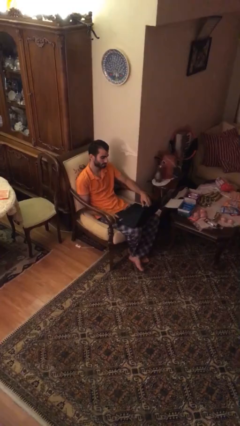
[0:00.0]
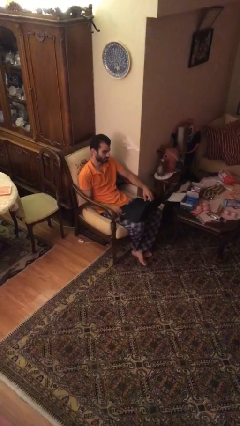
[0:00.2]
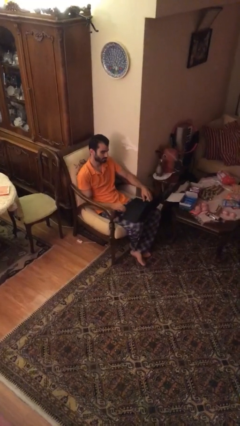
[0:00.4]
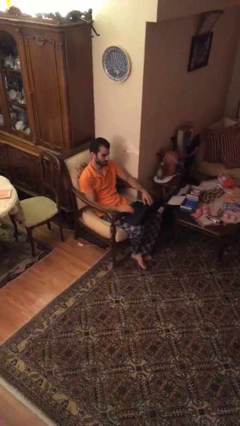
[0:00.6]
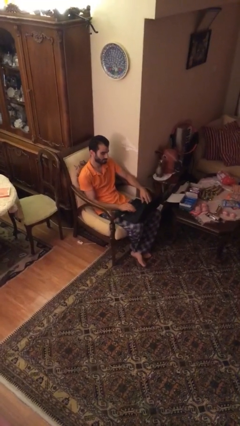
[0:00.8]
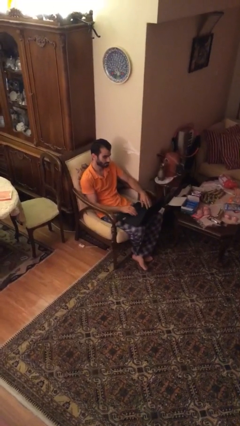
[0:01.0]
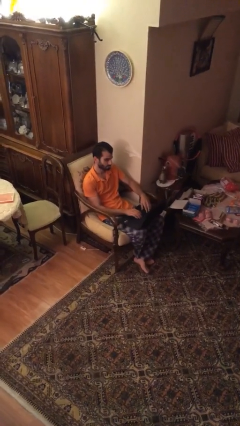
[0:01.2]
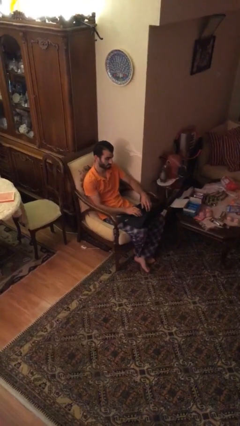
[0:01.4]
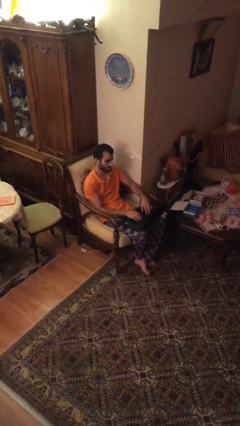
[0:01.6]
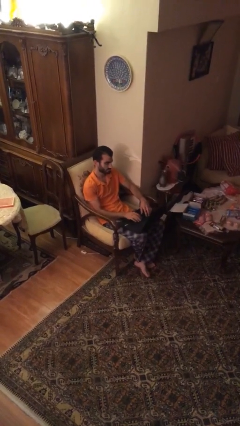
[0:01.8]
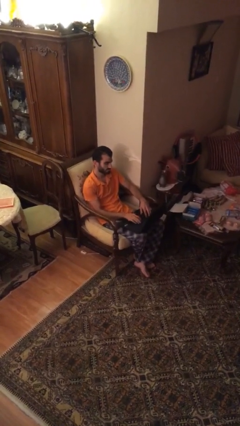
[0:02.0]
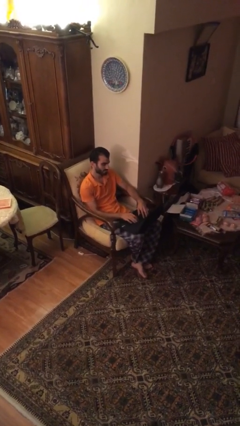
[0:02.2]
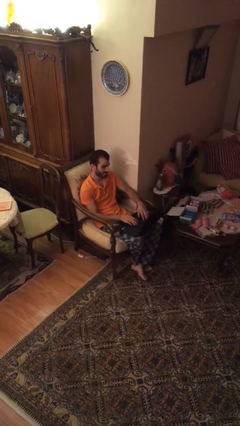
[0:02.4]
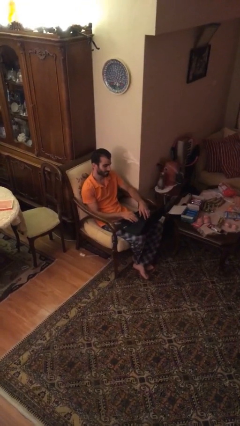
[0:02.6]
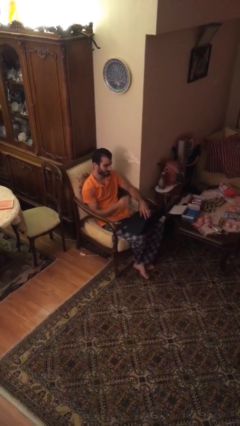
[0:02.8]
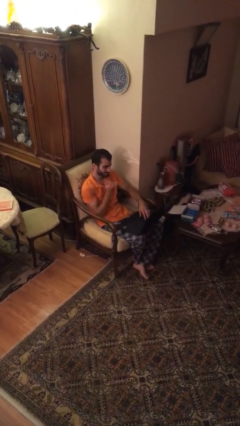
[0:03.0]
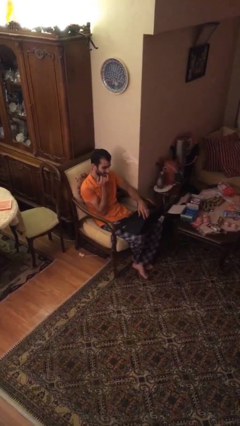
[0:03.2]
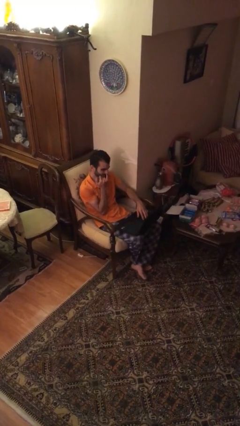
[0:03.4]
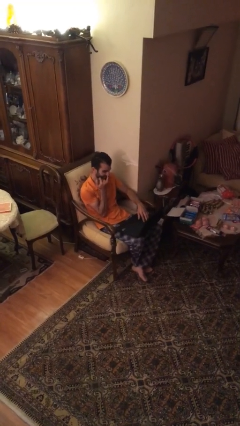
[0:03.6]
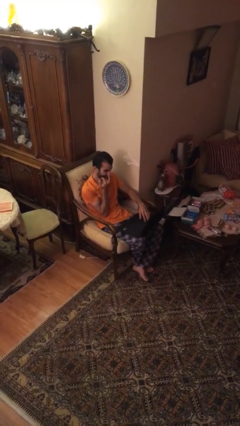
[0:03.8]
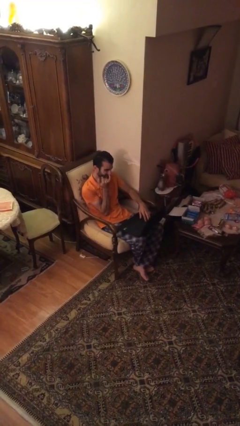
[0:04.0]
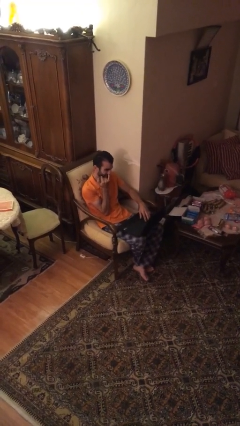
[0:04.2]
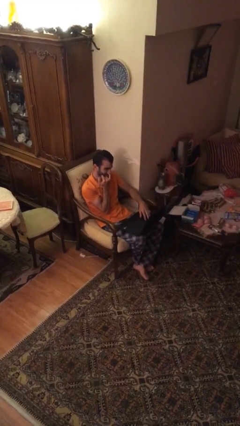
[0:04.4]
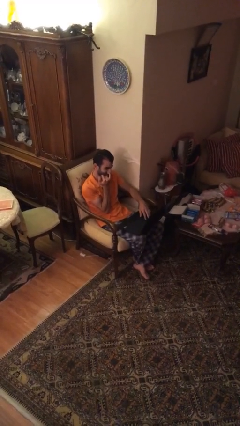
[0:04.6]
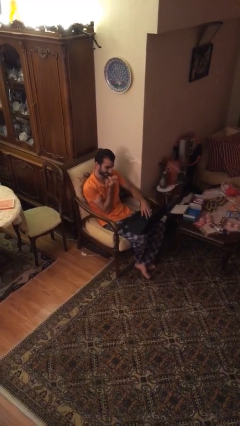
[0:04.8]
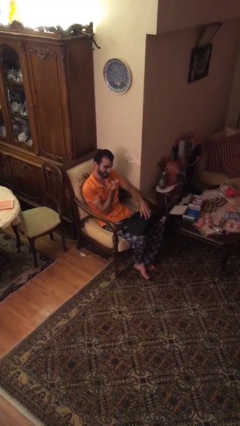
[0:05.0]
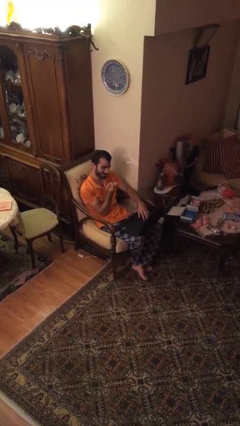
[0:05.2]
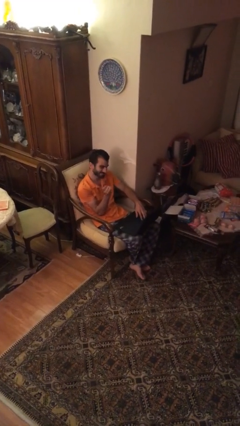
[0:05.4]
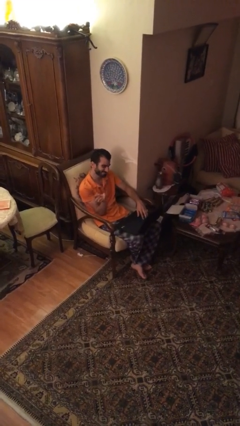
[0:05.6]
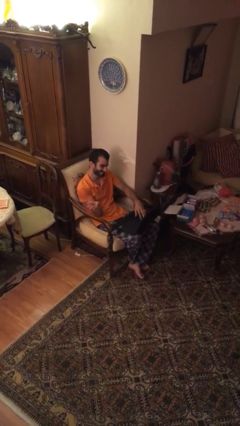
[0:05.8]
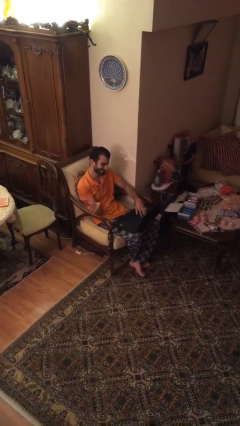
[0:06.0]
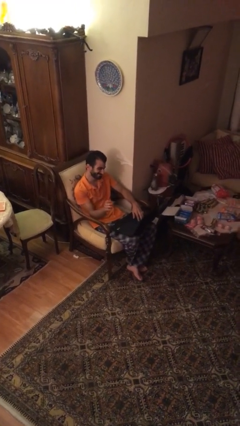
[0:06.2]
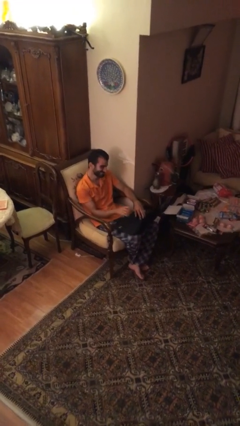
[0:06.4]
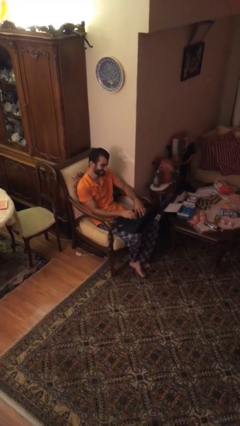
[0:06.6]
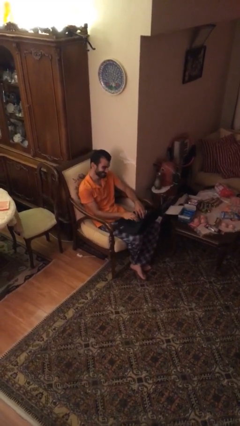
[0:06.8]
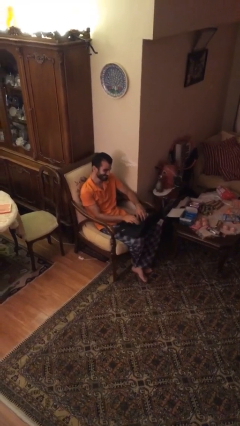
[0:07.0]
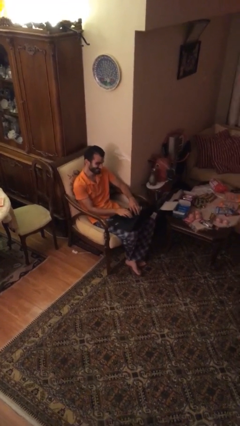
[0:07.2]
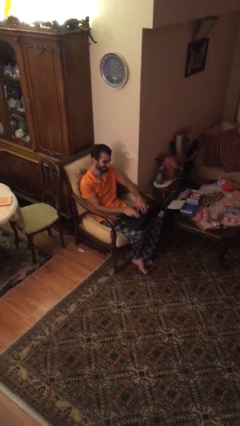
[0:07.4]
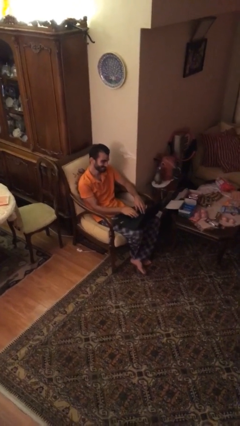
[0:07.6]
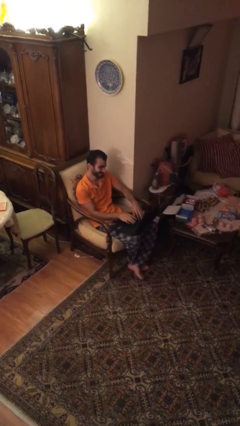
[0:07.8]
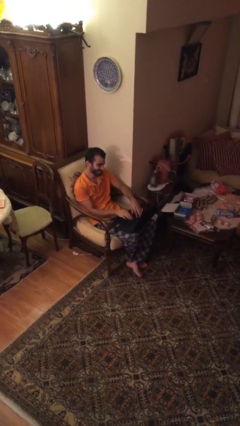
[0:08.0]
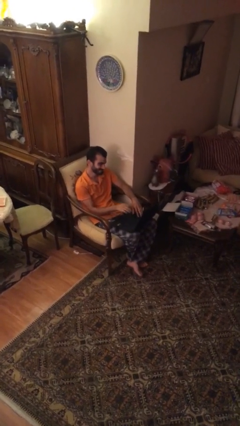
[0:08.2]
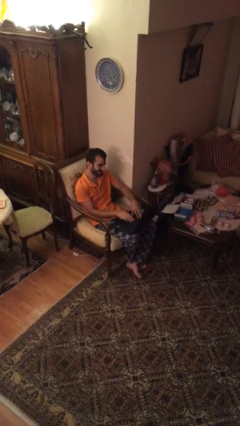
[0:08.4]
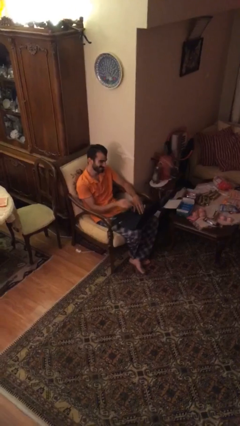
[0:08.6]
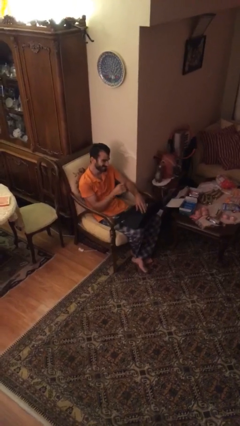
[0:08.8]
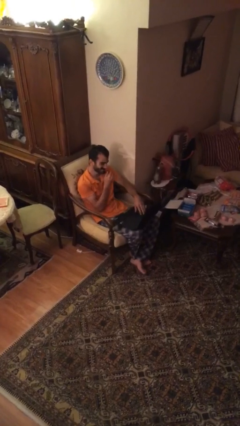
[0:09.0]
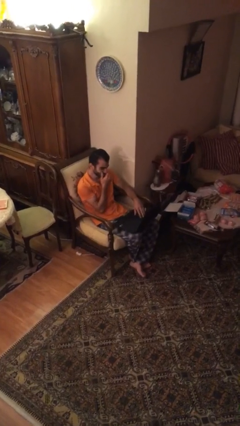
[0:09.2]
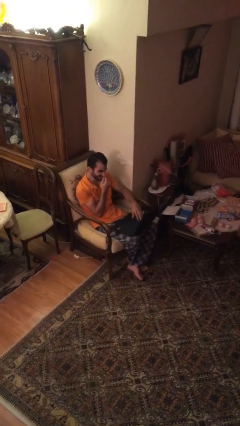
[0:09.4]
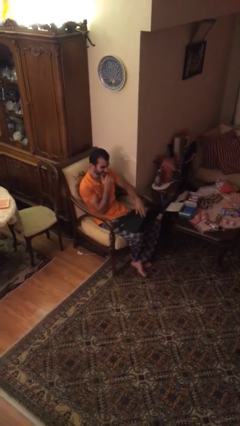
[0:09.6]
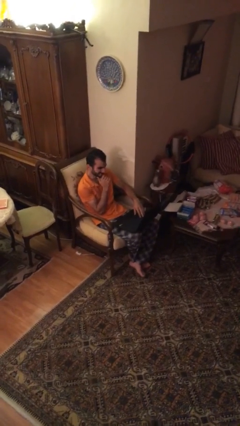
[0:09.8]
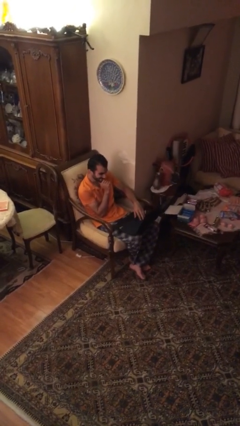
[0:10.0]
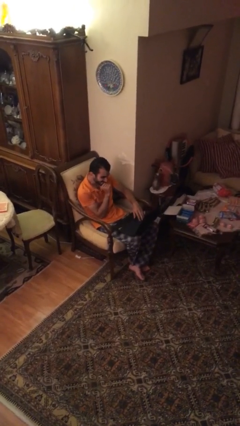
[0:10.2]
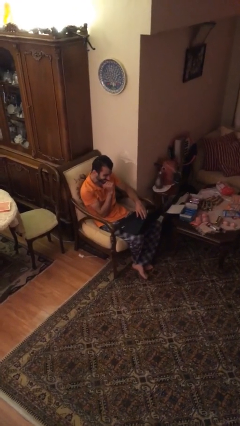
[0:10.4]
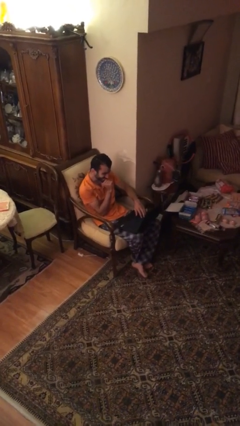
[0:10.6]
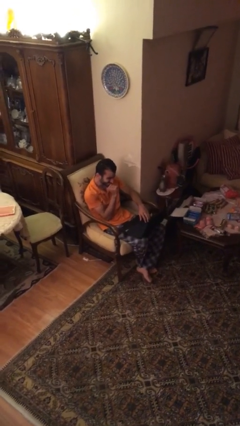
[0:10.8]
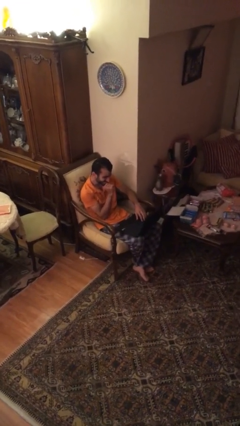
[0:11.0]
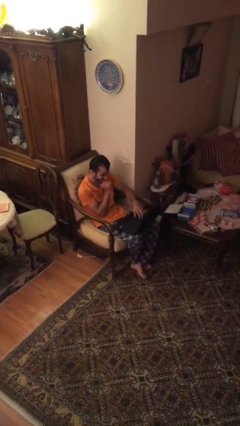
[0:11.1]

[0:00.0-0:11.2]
person interacts with laptop

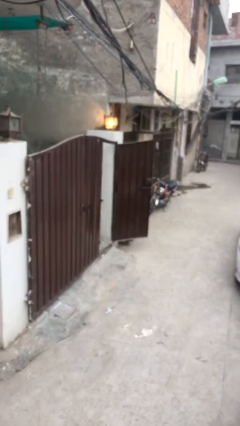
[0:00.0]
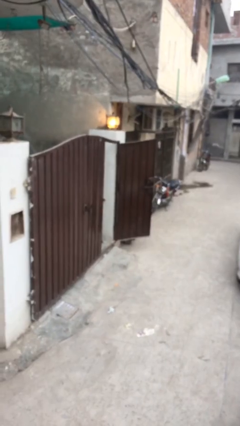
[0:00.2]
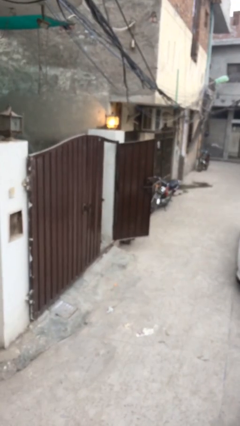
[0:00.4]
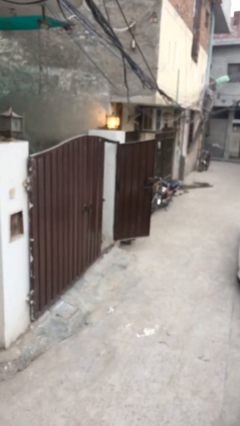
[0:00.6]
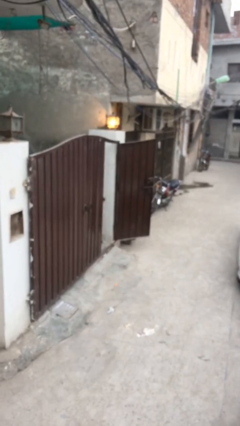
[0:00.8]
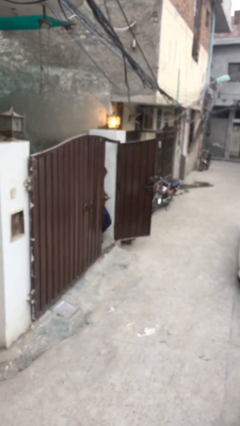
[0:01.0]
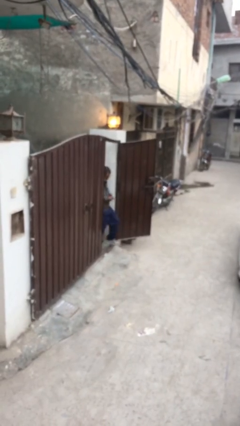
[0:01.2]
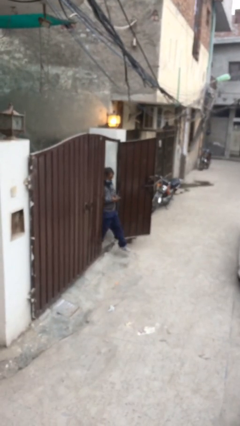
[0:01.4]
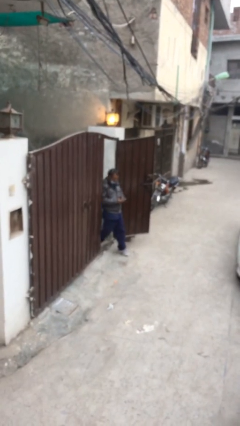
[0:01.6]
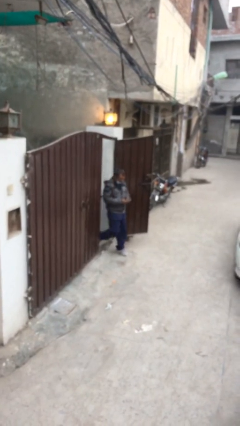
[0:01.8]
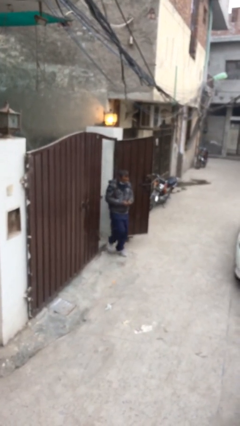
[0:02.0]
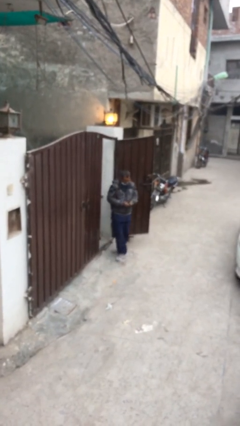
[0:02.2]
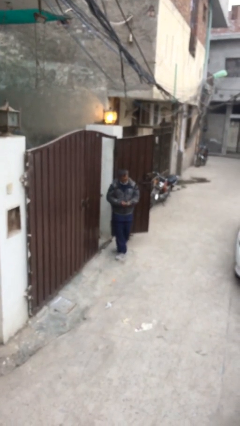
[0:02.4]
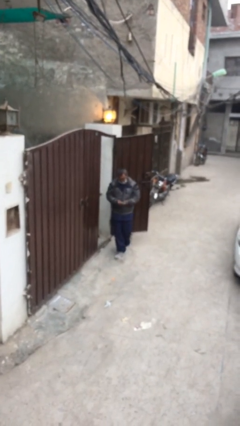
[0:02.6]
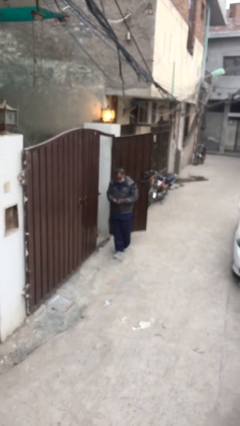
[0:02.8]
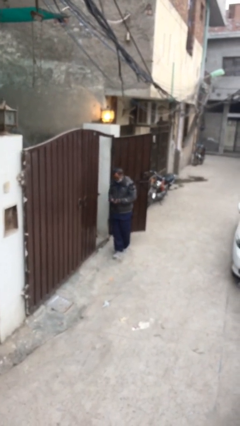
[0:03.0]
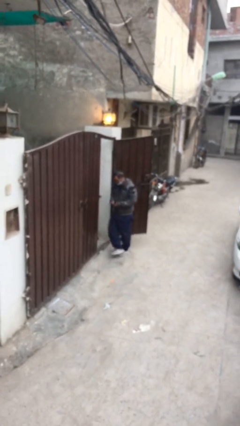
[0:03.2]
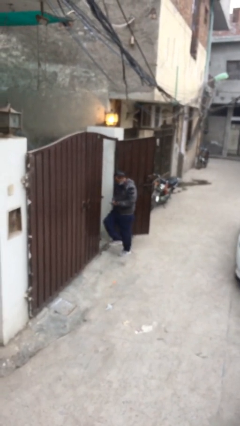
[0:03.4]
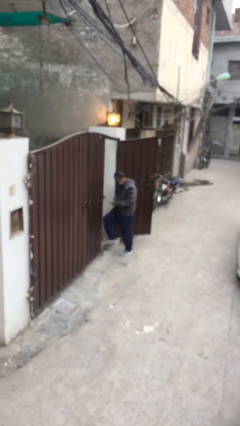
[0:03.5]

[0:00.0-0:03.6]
person enters scene through structure

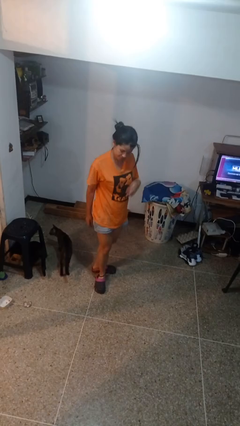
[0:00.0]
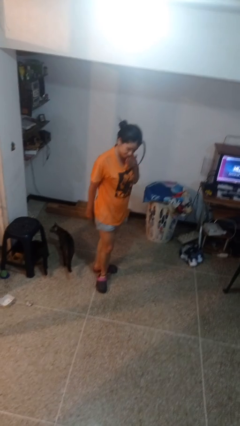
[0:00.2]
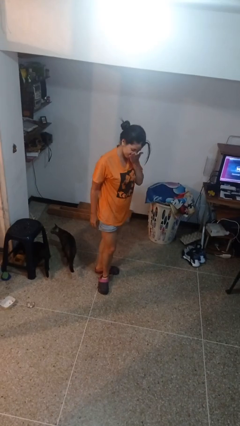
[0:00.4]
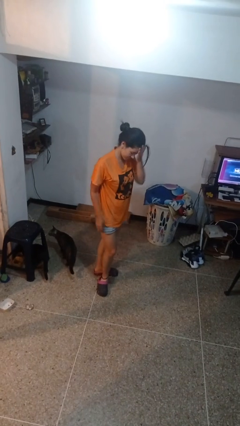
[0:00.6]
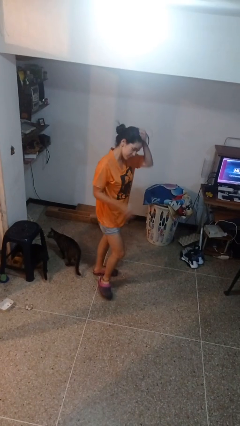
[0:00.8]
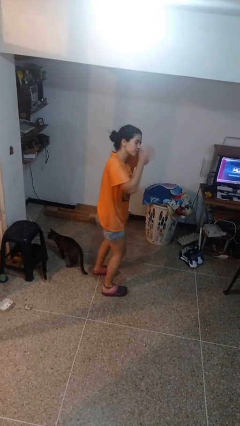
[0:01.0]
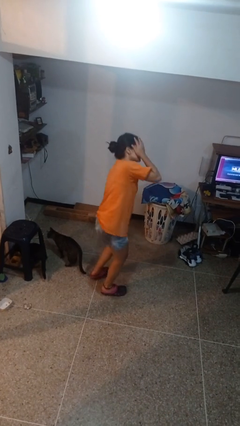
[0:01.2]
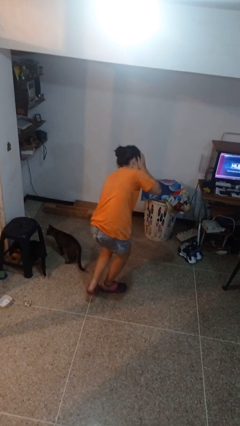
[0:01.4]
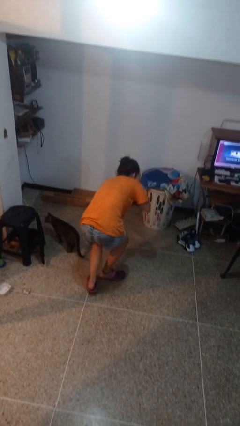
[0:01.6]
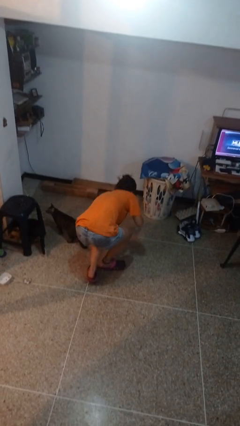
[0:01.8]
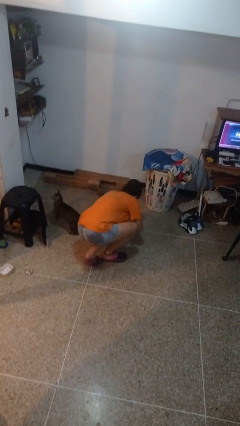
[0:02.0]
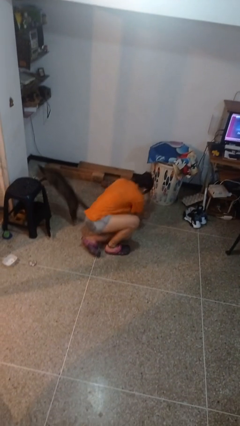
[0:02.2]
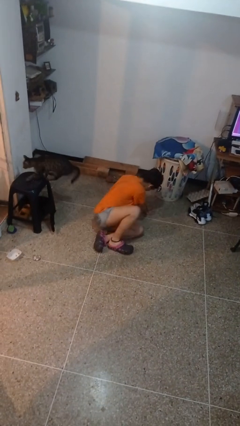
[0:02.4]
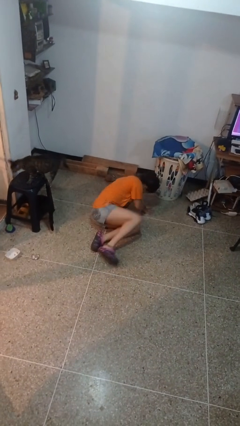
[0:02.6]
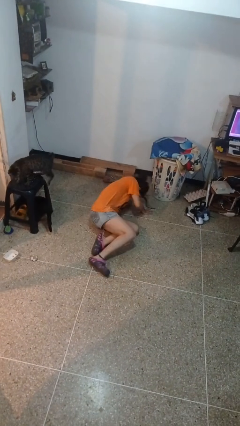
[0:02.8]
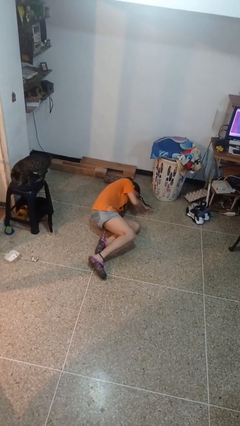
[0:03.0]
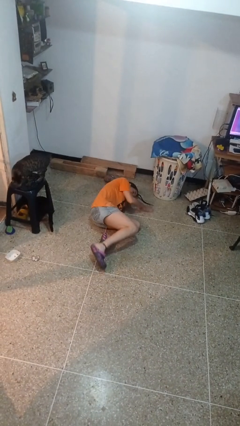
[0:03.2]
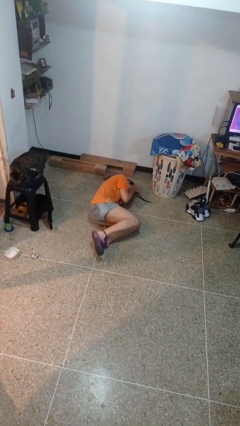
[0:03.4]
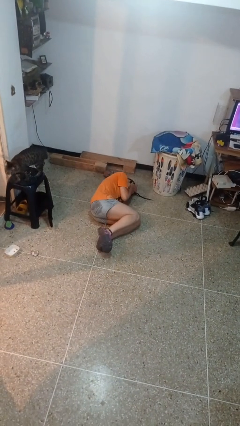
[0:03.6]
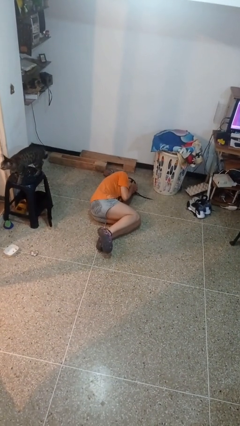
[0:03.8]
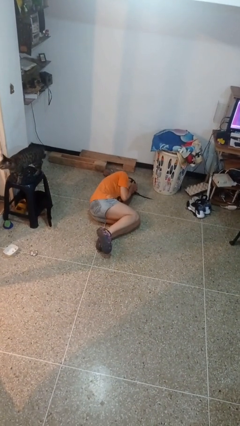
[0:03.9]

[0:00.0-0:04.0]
person falls while standing
